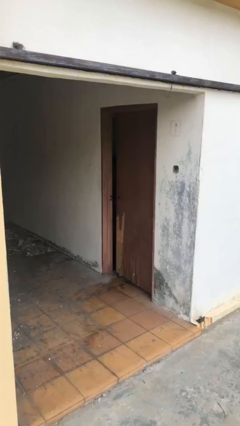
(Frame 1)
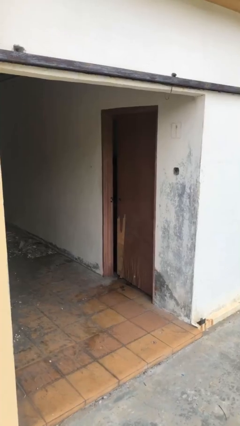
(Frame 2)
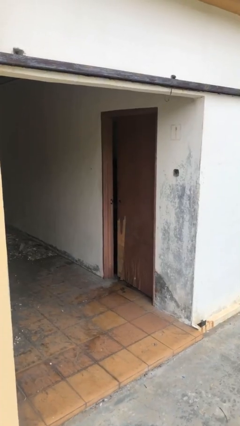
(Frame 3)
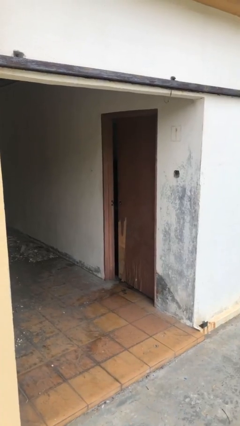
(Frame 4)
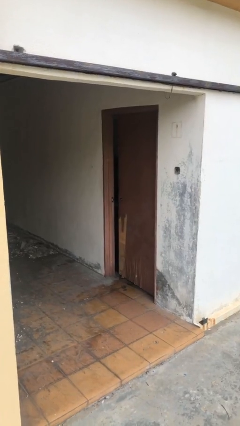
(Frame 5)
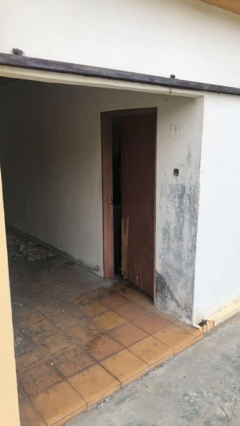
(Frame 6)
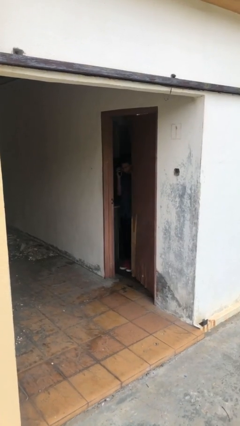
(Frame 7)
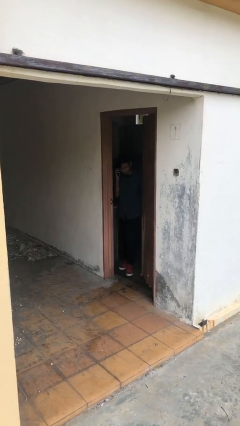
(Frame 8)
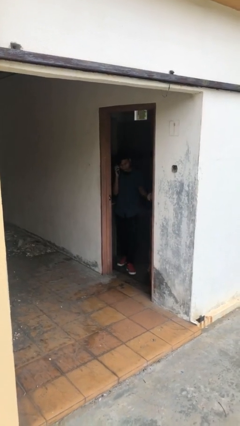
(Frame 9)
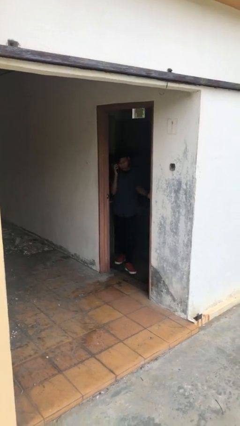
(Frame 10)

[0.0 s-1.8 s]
person opens facility door

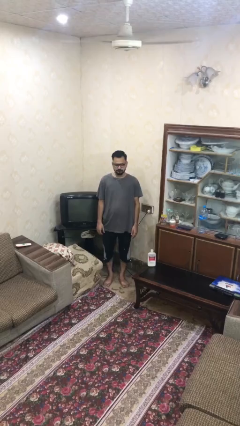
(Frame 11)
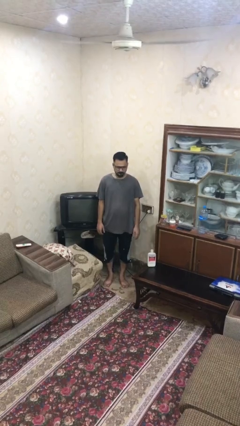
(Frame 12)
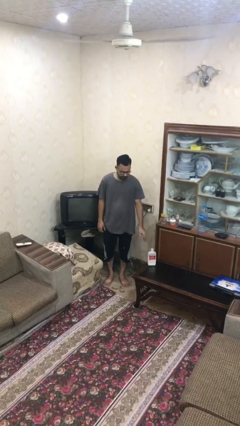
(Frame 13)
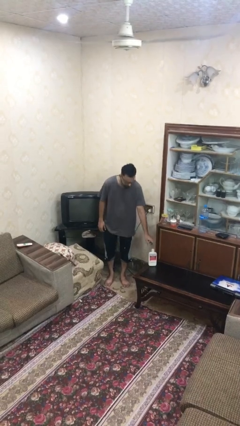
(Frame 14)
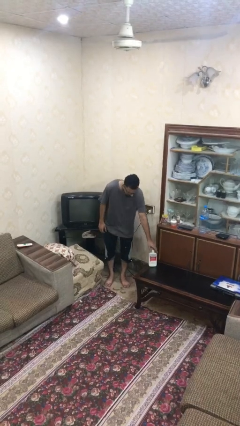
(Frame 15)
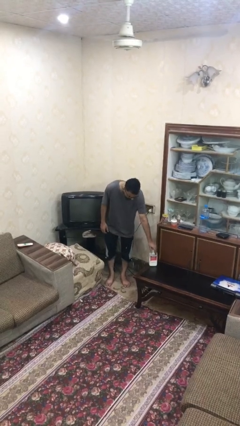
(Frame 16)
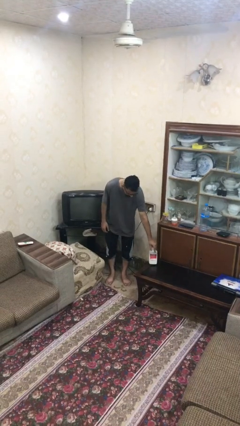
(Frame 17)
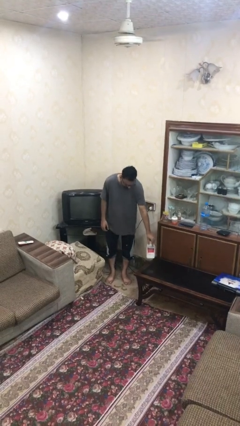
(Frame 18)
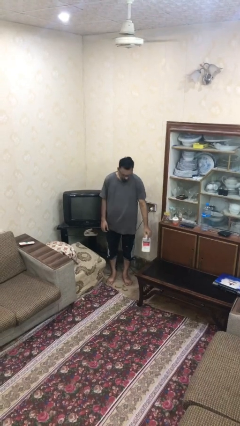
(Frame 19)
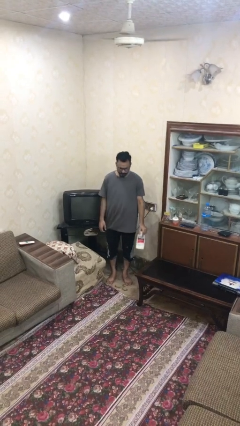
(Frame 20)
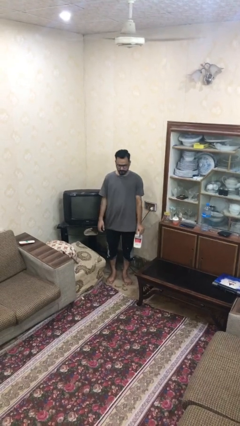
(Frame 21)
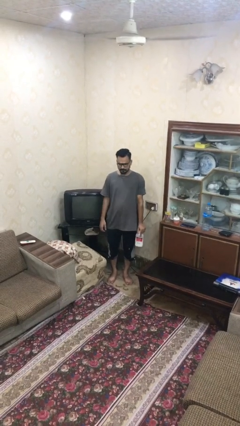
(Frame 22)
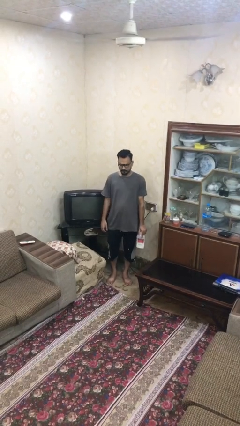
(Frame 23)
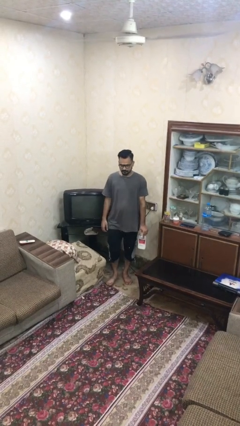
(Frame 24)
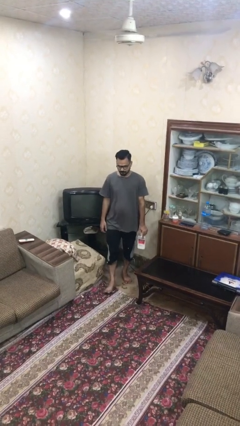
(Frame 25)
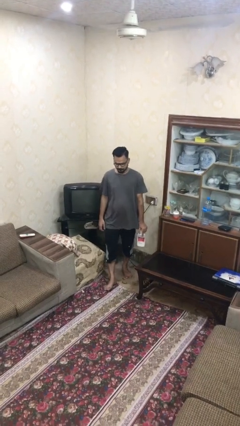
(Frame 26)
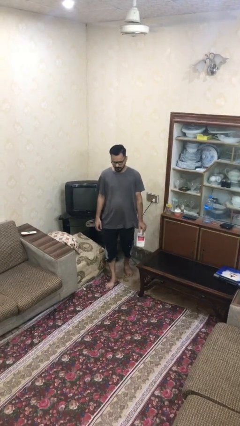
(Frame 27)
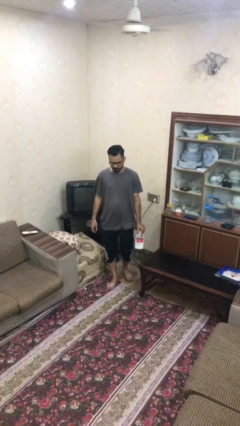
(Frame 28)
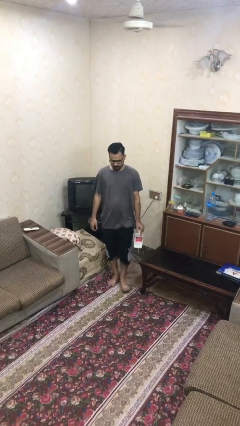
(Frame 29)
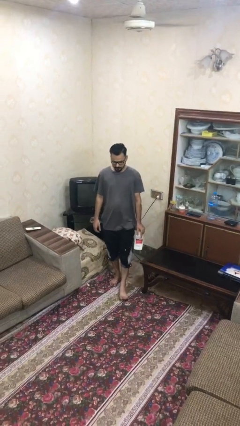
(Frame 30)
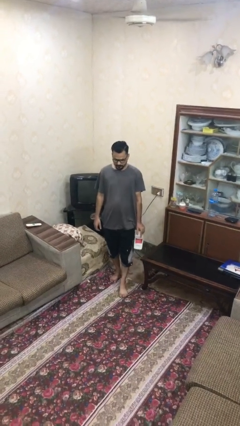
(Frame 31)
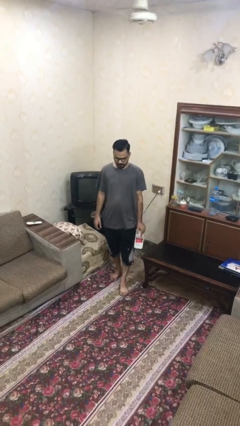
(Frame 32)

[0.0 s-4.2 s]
person picks up object from table

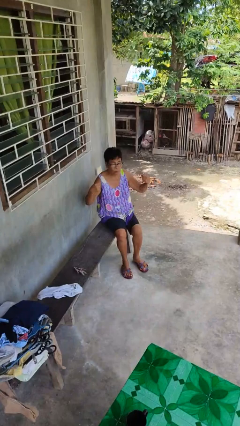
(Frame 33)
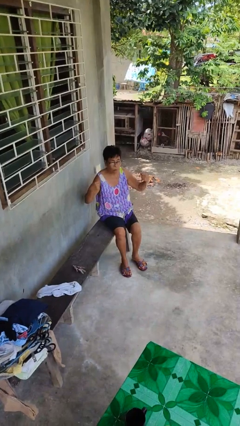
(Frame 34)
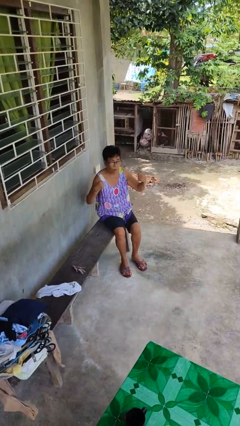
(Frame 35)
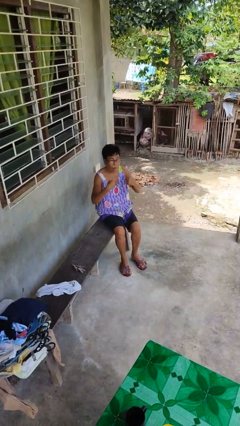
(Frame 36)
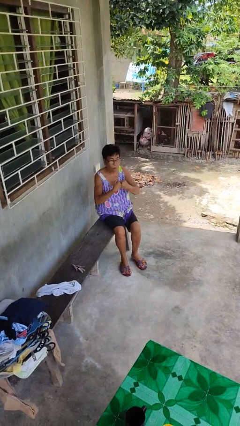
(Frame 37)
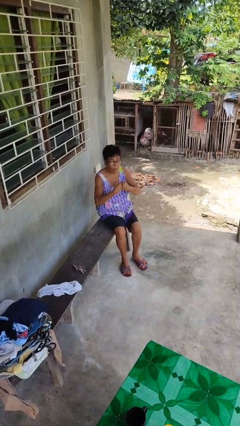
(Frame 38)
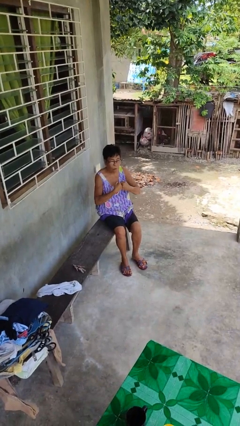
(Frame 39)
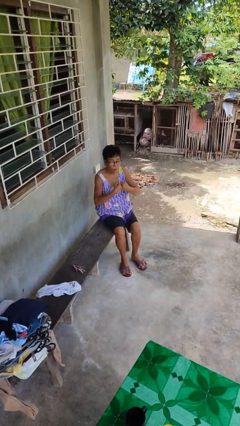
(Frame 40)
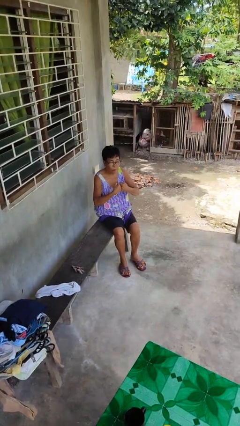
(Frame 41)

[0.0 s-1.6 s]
person gestures zoom out

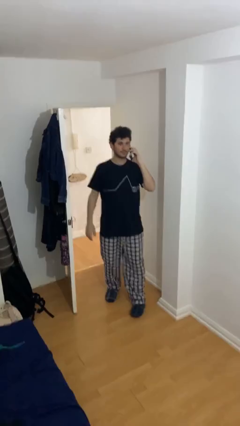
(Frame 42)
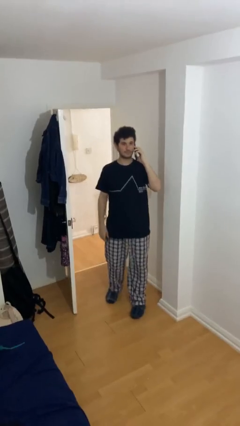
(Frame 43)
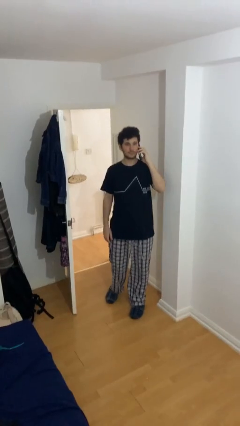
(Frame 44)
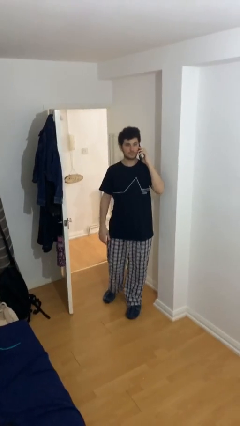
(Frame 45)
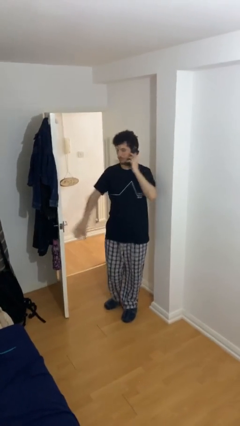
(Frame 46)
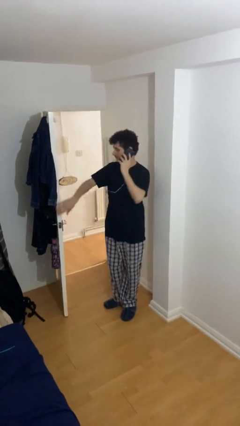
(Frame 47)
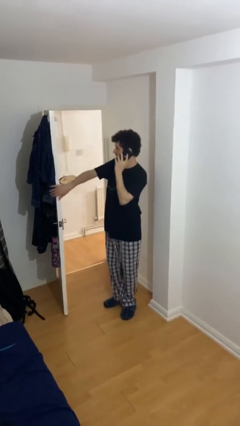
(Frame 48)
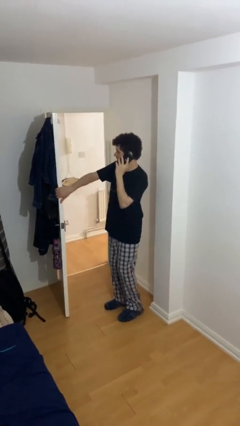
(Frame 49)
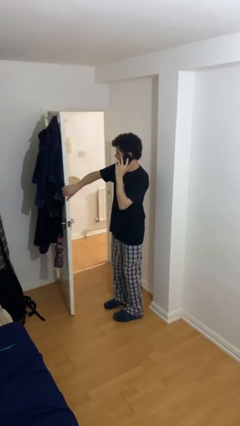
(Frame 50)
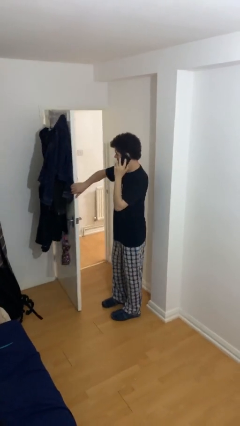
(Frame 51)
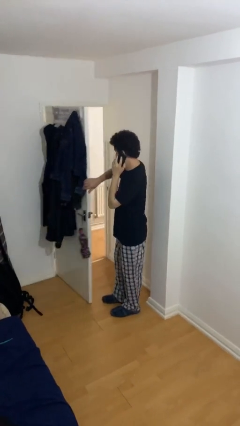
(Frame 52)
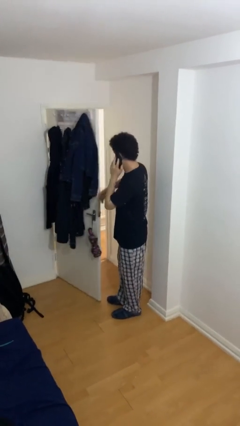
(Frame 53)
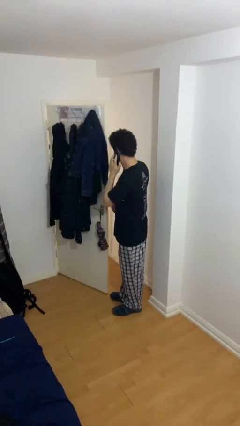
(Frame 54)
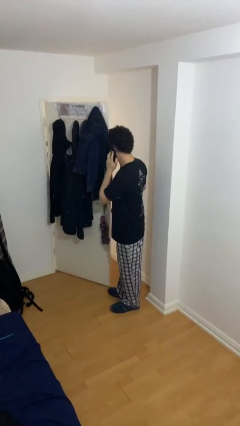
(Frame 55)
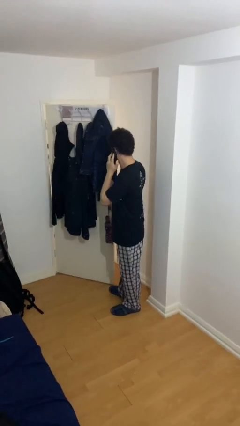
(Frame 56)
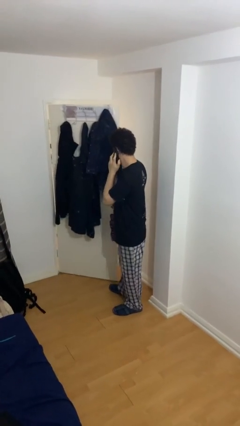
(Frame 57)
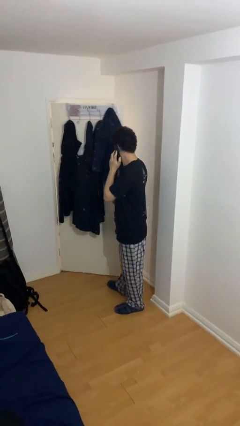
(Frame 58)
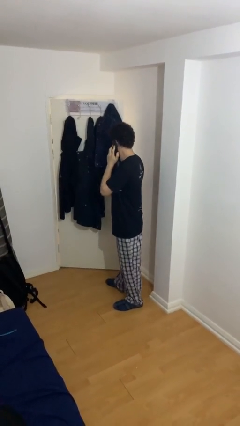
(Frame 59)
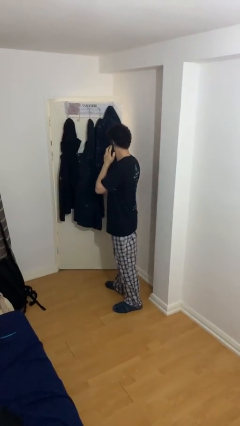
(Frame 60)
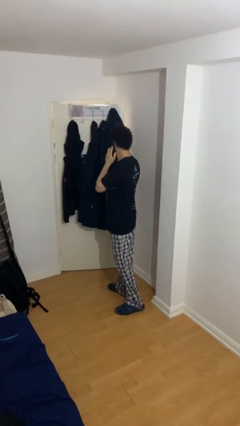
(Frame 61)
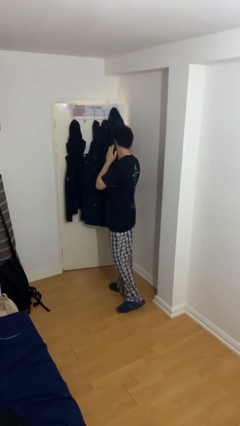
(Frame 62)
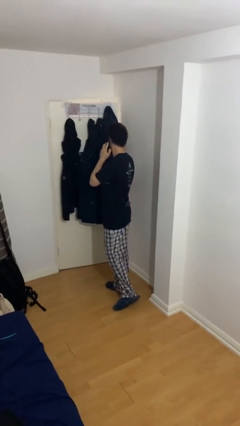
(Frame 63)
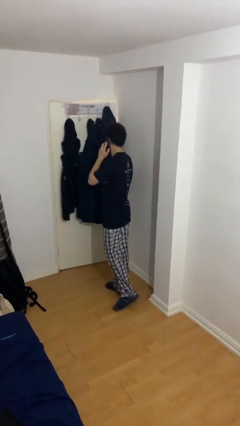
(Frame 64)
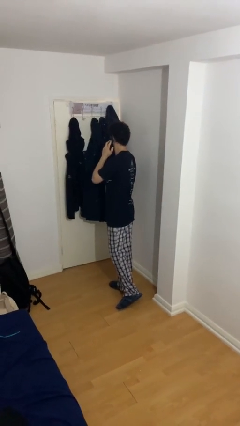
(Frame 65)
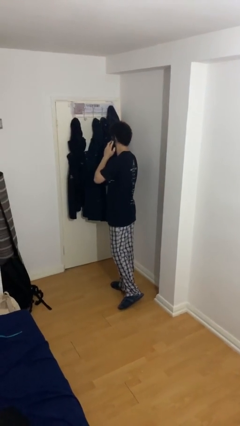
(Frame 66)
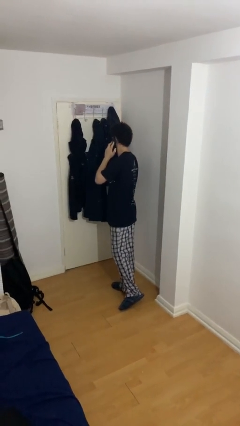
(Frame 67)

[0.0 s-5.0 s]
person closes facility door

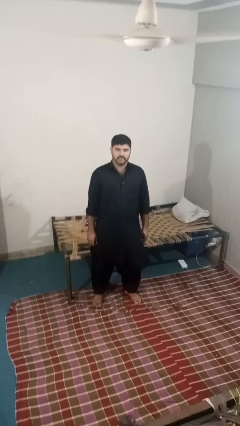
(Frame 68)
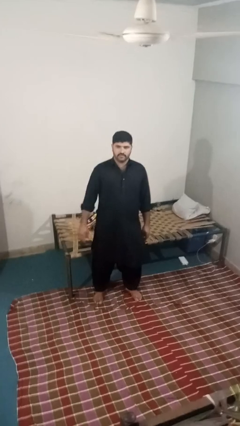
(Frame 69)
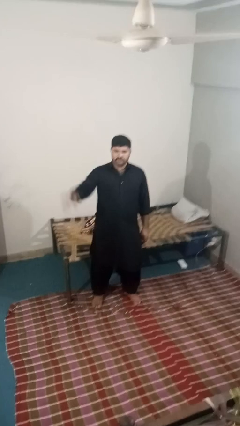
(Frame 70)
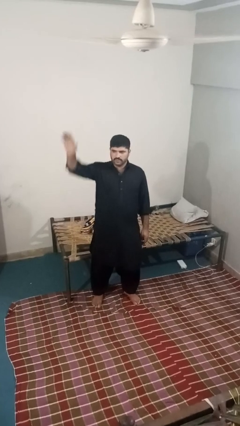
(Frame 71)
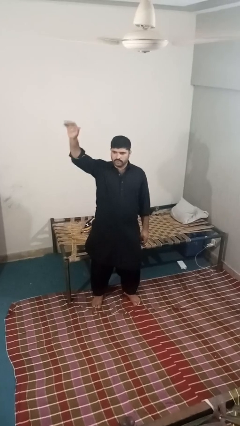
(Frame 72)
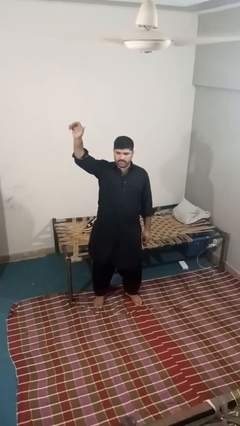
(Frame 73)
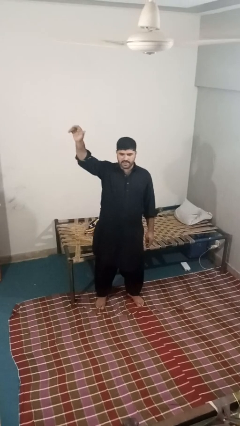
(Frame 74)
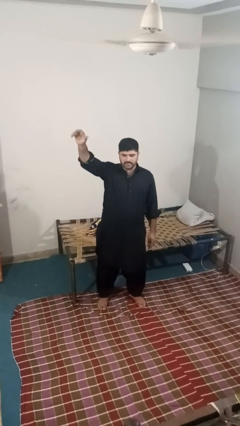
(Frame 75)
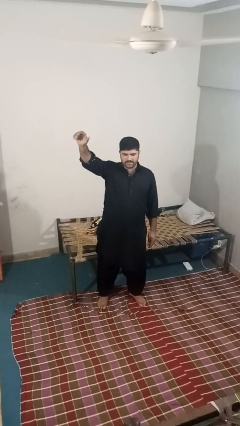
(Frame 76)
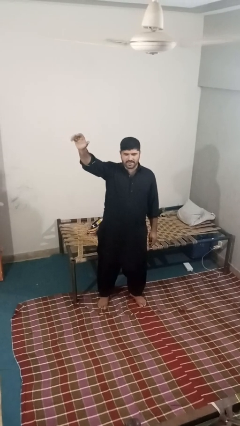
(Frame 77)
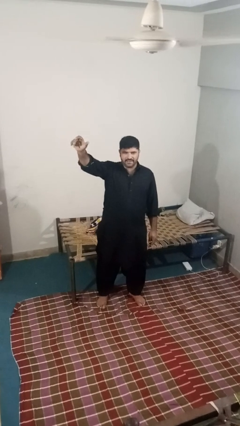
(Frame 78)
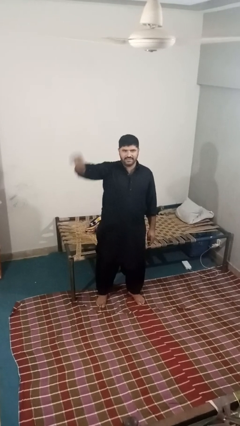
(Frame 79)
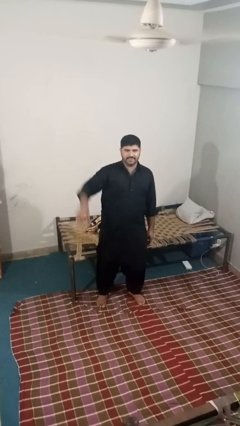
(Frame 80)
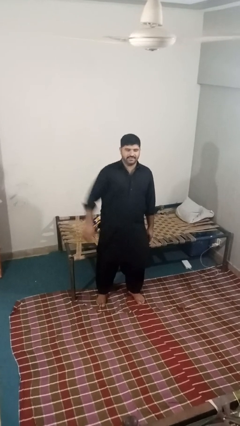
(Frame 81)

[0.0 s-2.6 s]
person gestures come here

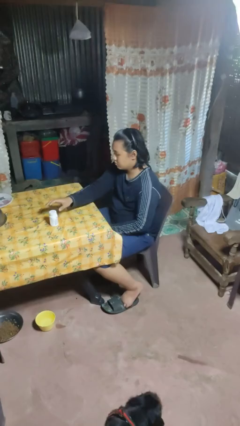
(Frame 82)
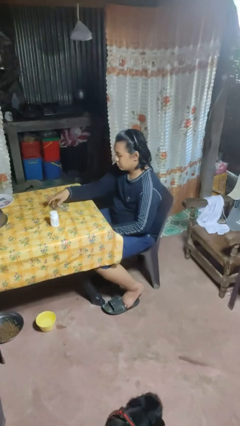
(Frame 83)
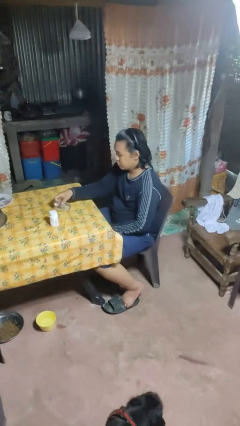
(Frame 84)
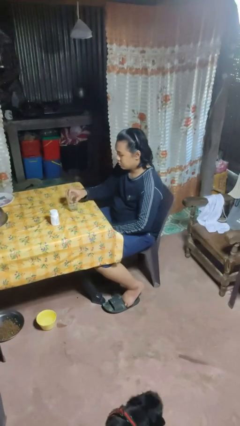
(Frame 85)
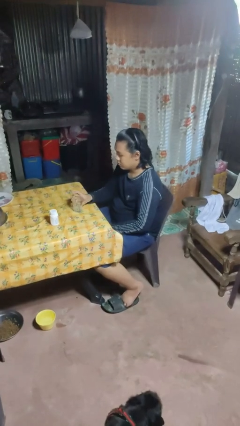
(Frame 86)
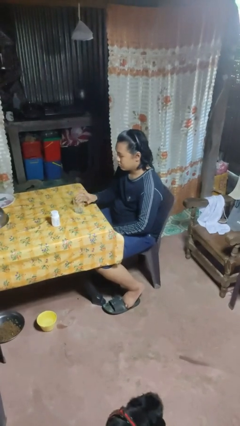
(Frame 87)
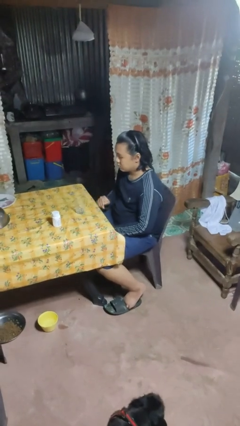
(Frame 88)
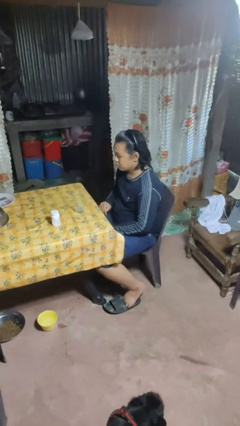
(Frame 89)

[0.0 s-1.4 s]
person sets upright glass

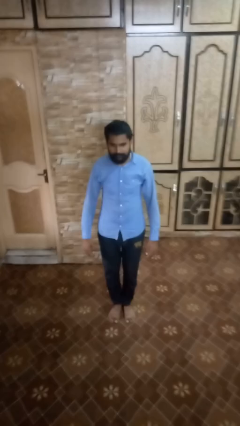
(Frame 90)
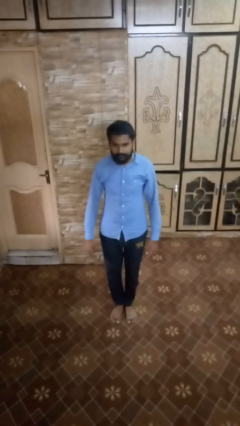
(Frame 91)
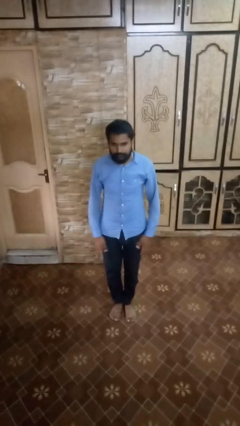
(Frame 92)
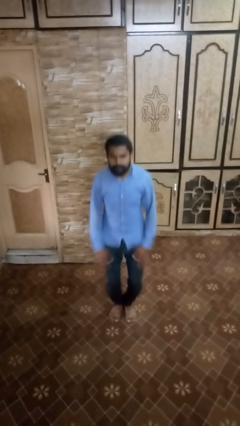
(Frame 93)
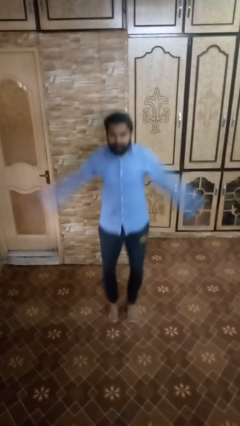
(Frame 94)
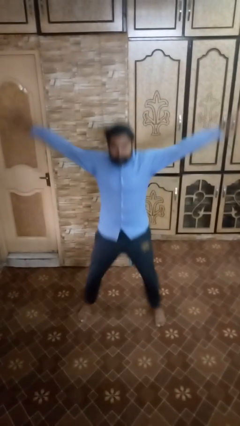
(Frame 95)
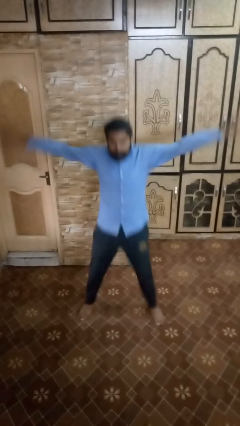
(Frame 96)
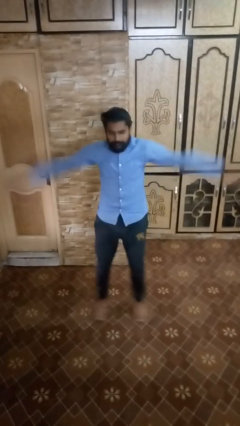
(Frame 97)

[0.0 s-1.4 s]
person exercises with jumping jacks
